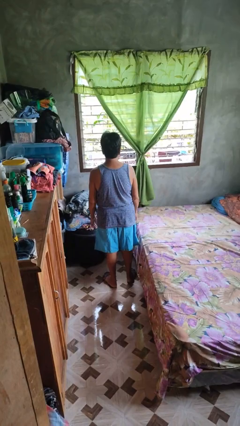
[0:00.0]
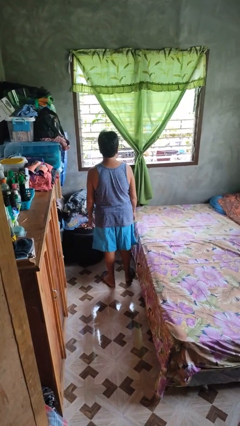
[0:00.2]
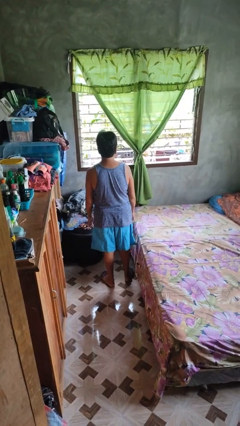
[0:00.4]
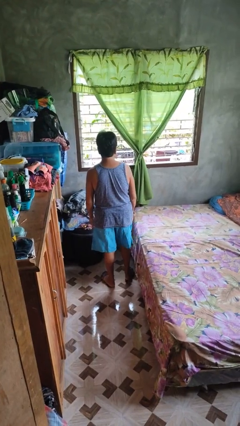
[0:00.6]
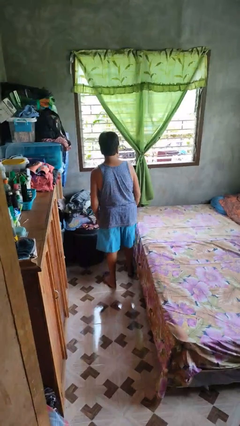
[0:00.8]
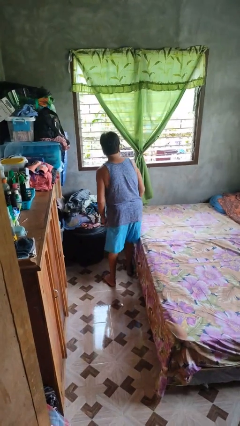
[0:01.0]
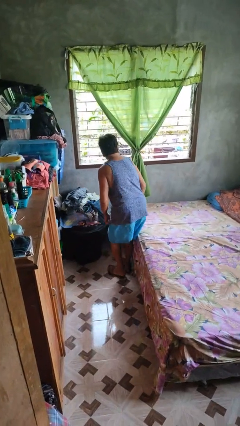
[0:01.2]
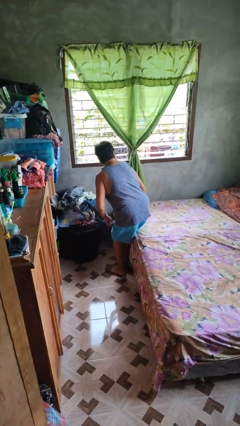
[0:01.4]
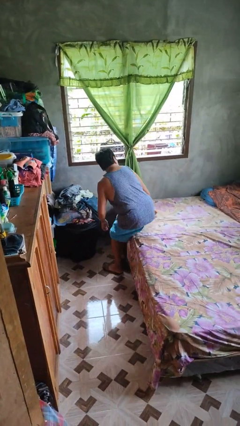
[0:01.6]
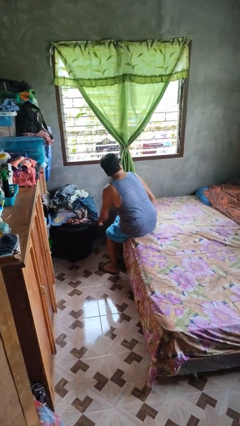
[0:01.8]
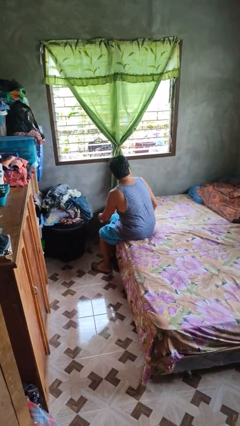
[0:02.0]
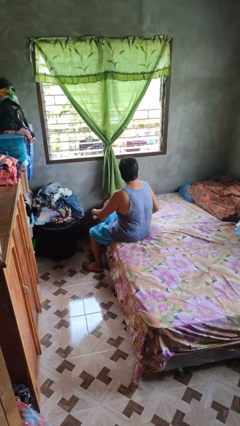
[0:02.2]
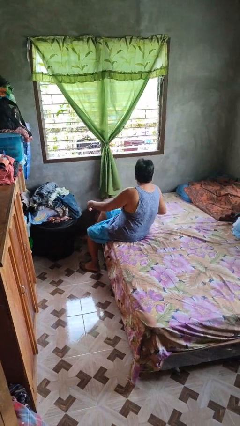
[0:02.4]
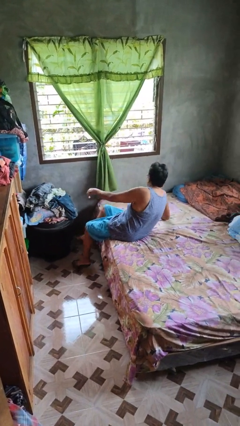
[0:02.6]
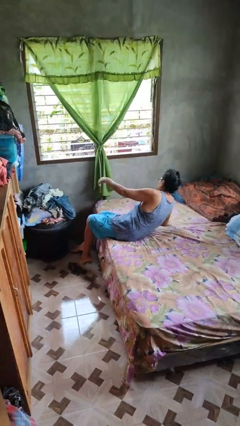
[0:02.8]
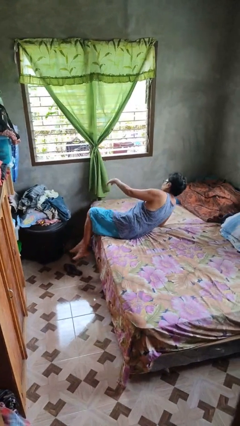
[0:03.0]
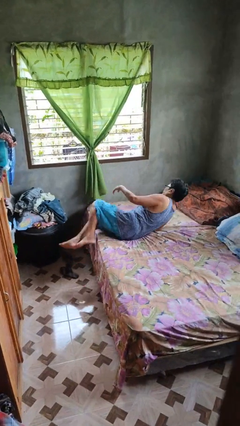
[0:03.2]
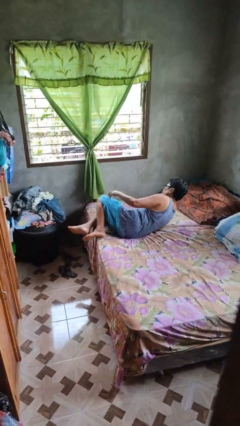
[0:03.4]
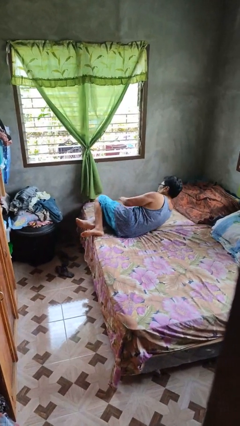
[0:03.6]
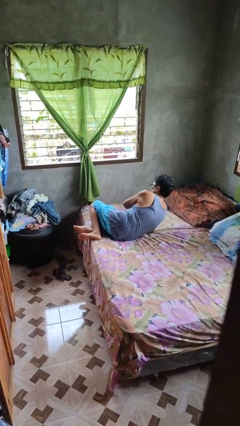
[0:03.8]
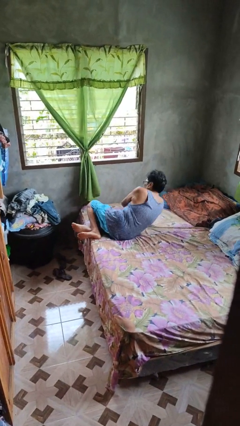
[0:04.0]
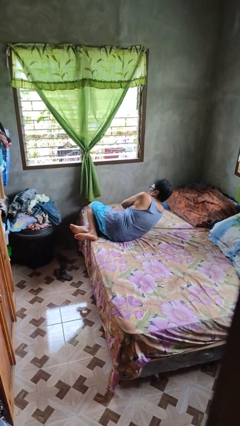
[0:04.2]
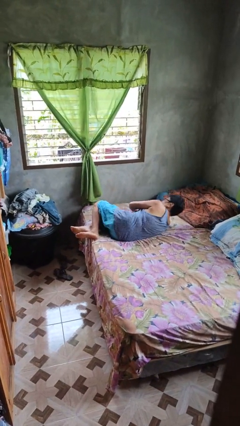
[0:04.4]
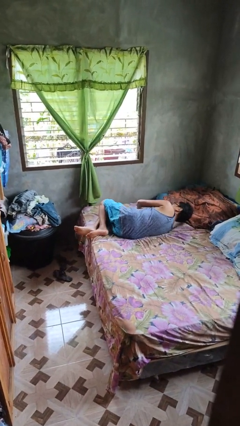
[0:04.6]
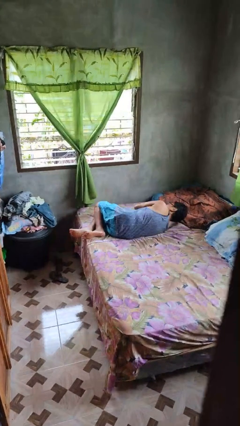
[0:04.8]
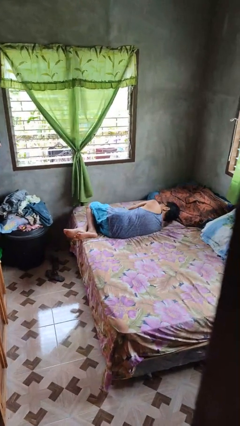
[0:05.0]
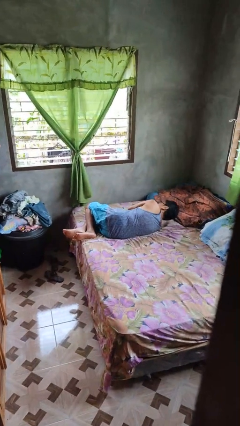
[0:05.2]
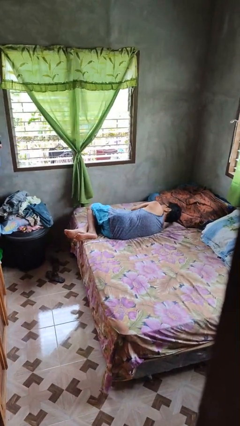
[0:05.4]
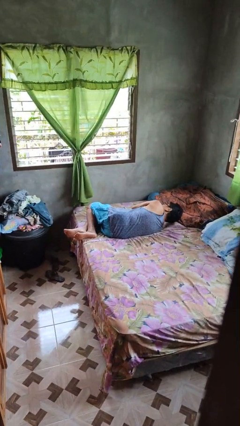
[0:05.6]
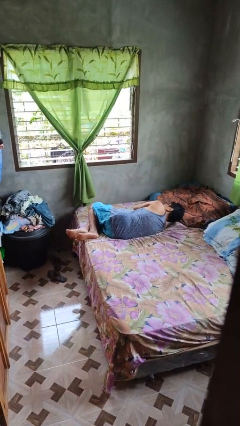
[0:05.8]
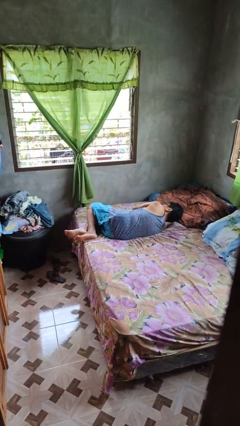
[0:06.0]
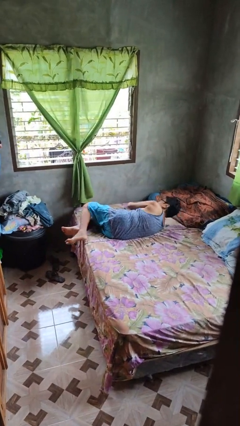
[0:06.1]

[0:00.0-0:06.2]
person lies down on bed

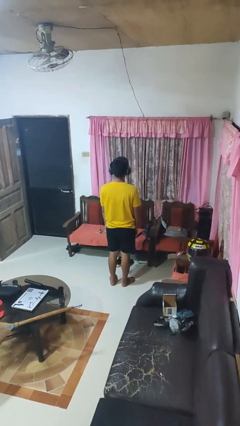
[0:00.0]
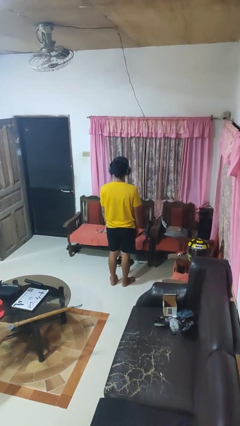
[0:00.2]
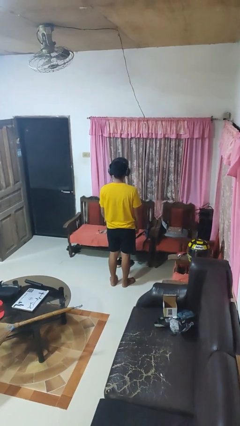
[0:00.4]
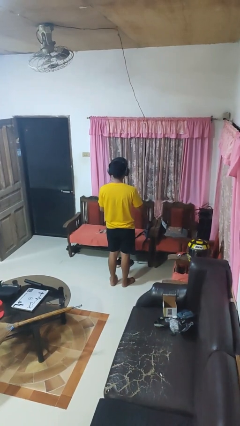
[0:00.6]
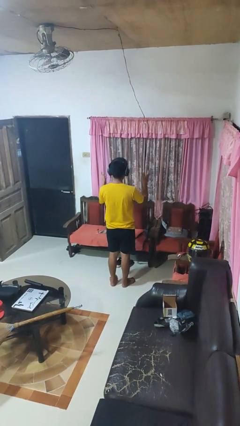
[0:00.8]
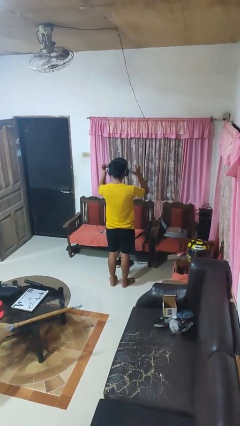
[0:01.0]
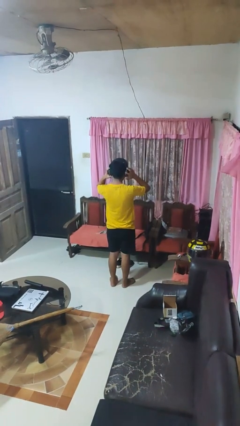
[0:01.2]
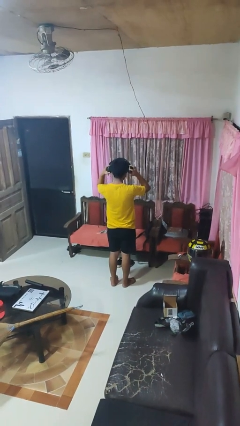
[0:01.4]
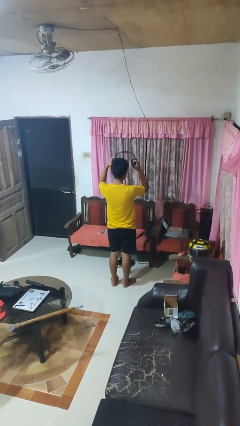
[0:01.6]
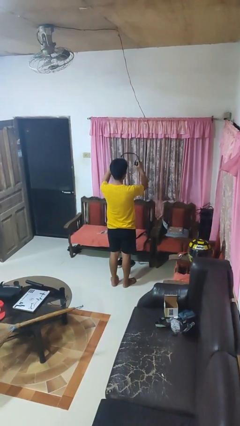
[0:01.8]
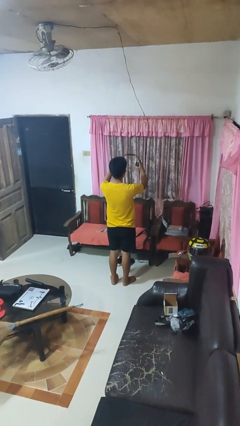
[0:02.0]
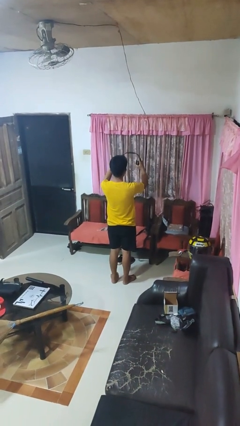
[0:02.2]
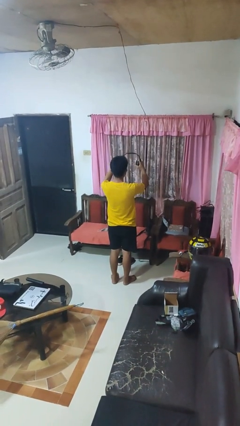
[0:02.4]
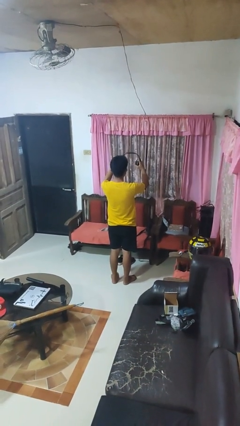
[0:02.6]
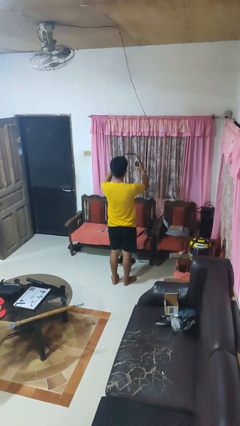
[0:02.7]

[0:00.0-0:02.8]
person takes off headphones

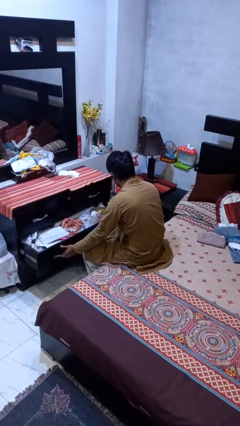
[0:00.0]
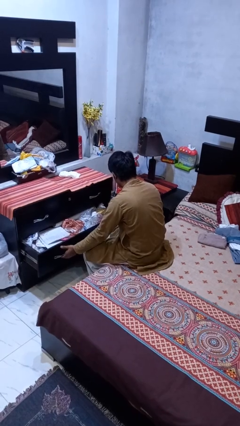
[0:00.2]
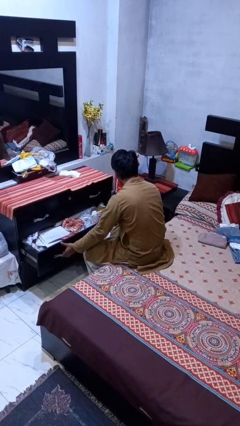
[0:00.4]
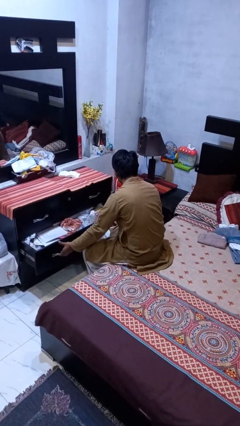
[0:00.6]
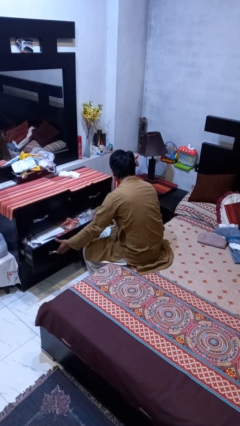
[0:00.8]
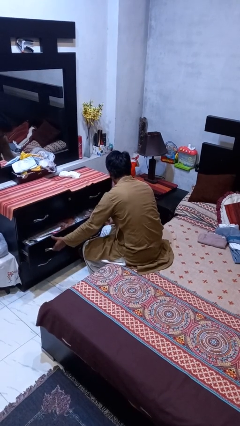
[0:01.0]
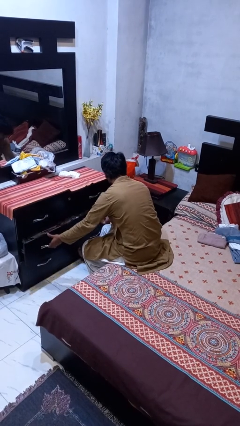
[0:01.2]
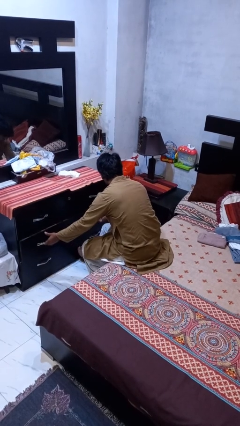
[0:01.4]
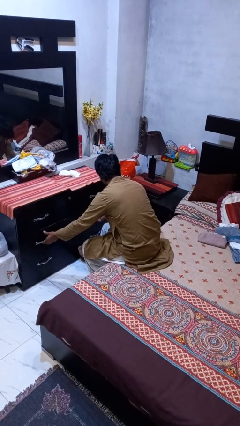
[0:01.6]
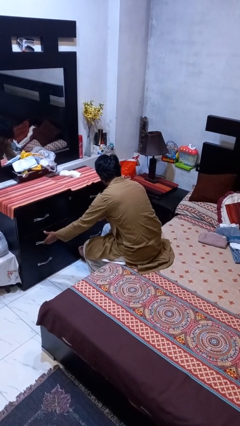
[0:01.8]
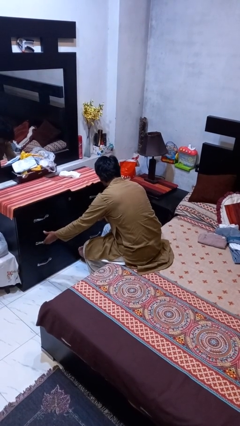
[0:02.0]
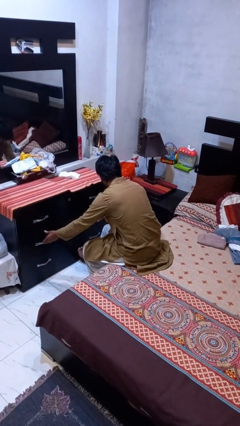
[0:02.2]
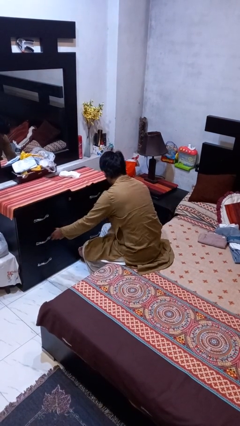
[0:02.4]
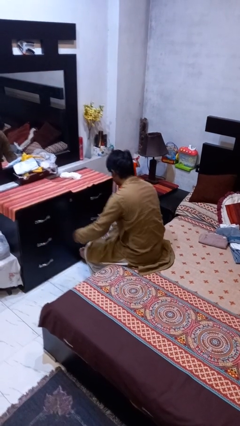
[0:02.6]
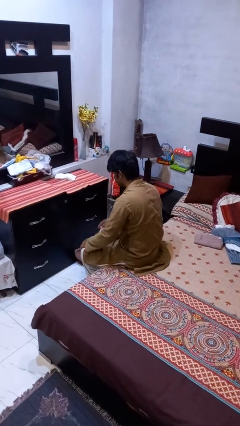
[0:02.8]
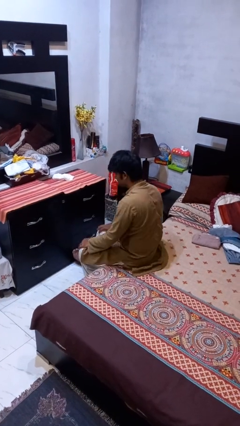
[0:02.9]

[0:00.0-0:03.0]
person closes dresser drawer

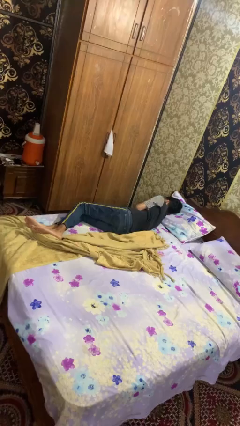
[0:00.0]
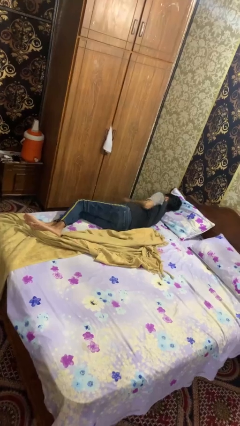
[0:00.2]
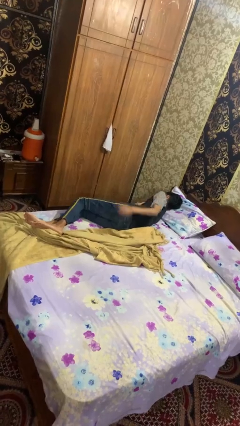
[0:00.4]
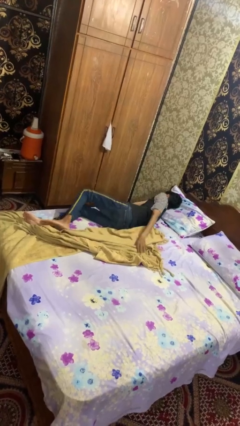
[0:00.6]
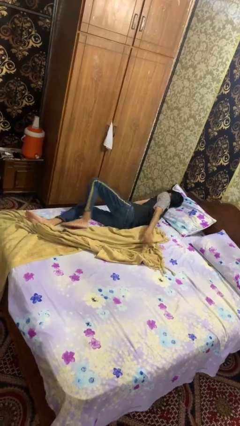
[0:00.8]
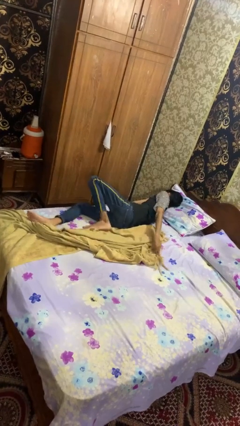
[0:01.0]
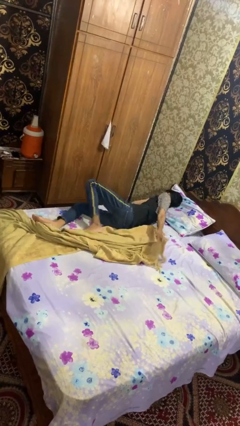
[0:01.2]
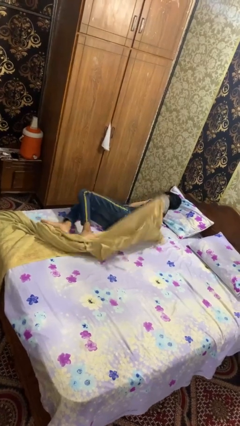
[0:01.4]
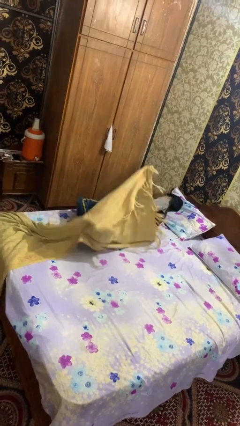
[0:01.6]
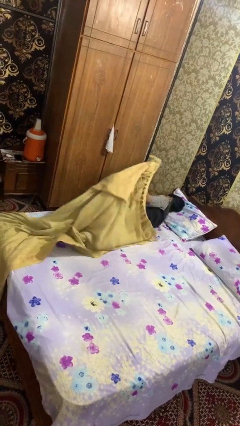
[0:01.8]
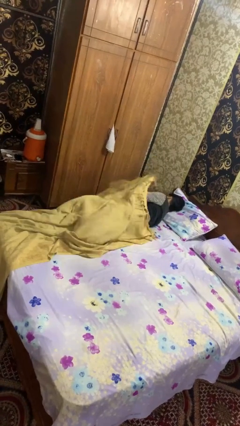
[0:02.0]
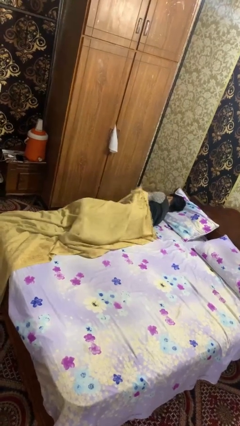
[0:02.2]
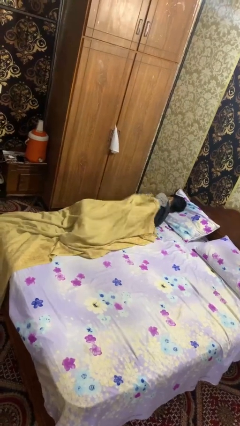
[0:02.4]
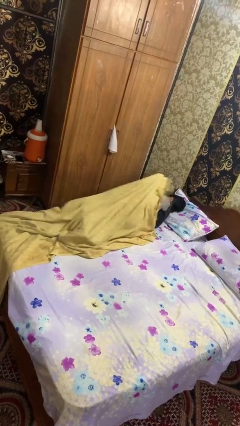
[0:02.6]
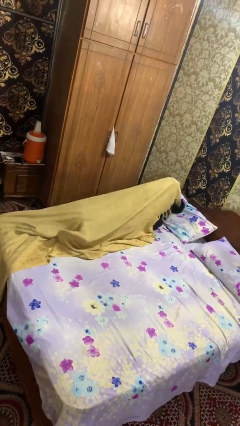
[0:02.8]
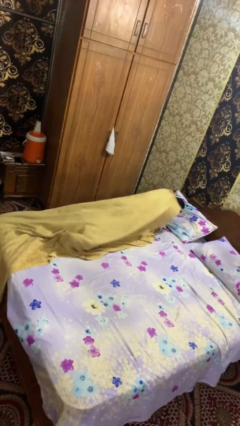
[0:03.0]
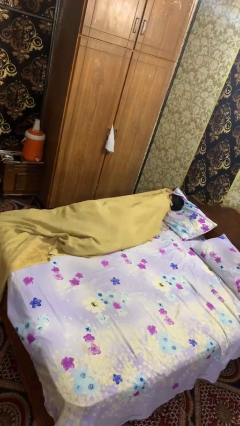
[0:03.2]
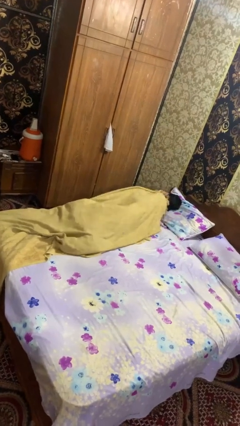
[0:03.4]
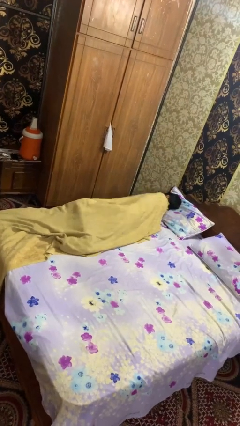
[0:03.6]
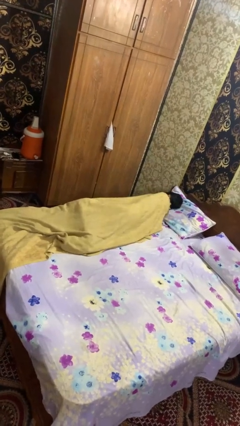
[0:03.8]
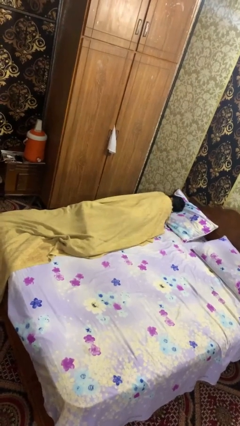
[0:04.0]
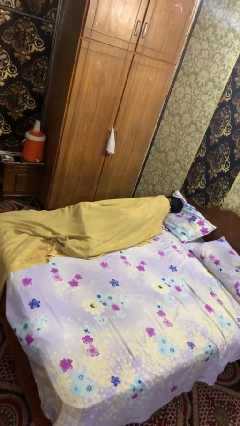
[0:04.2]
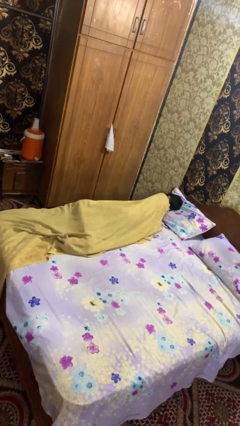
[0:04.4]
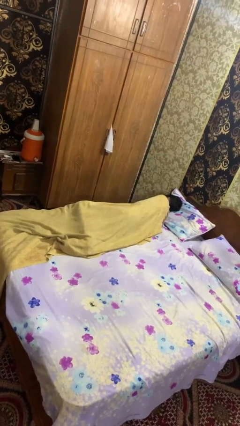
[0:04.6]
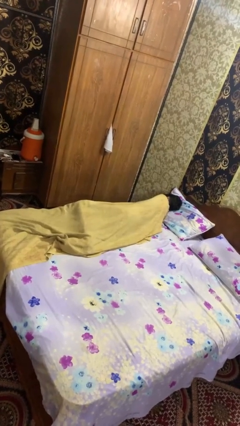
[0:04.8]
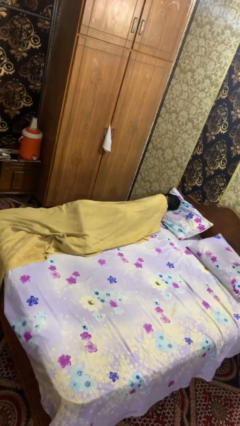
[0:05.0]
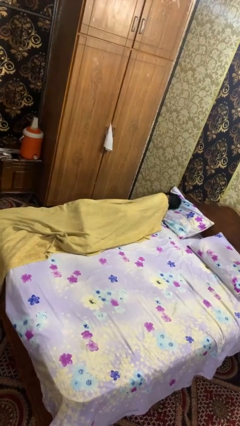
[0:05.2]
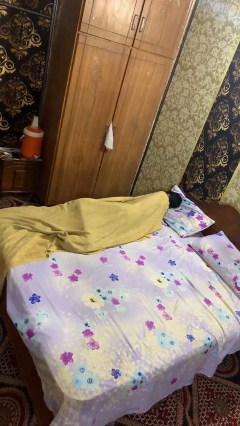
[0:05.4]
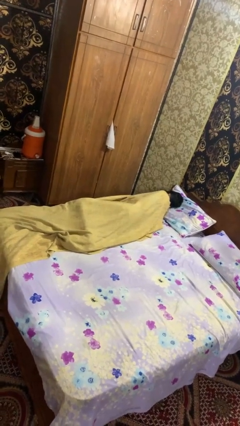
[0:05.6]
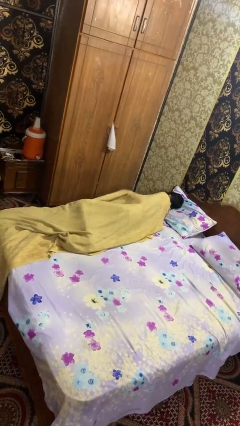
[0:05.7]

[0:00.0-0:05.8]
person covers with bedsheets

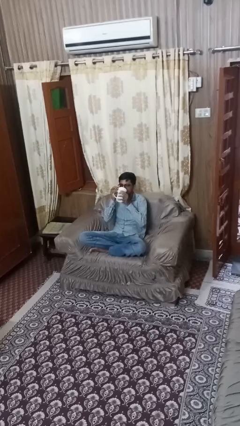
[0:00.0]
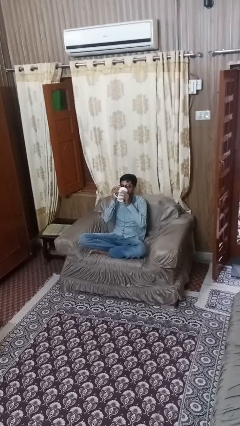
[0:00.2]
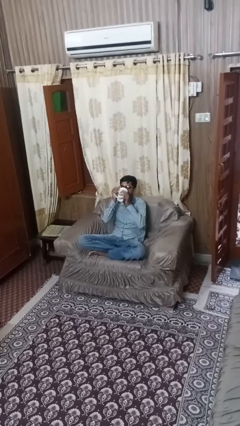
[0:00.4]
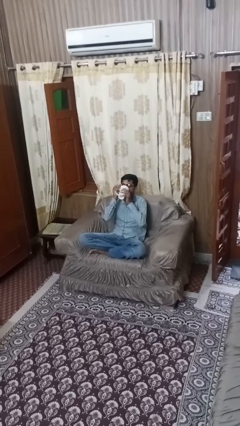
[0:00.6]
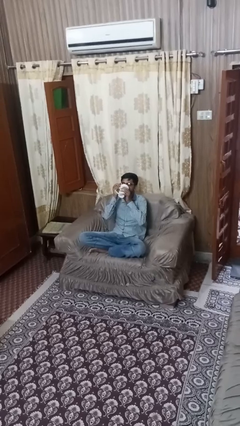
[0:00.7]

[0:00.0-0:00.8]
person drinks from mug
